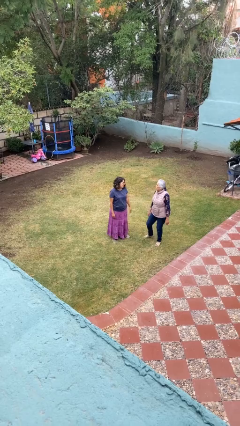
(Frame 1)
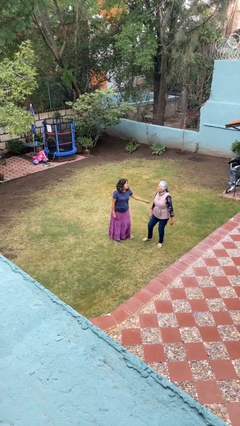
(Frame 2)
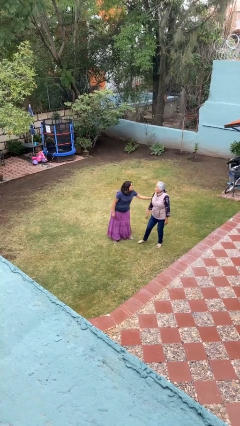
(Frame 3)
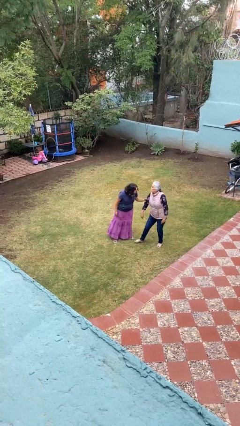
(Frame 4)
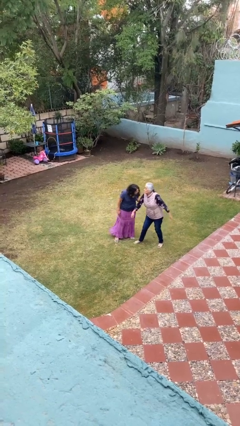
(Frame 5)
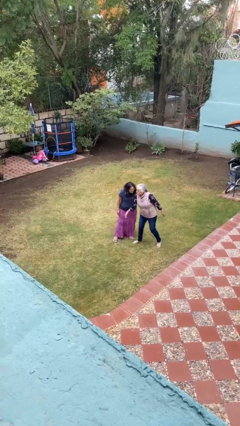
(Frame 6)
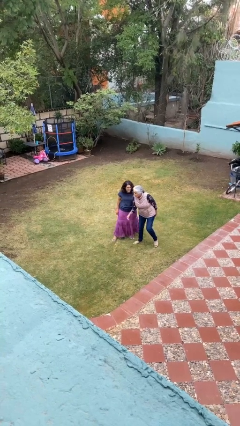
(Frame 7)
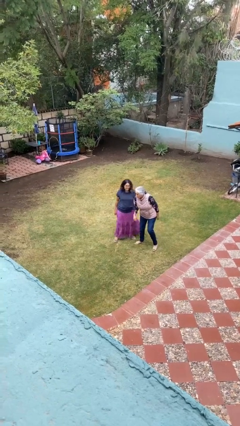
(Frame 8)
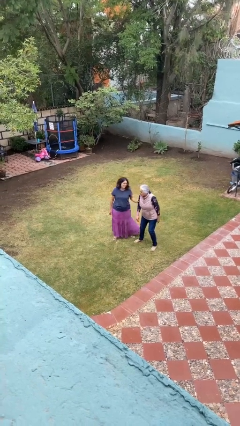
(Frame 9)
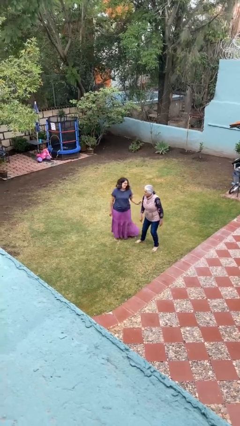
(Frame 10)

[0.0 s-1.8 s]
person grabs person by bicep

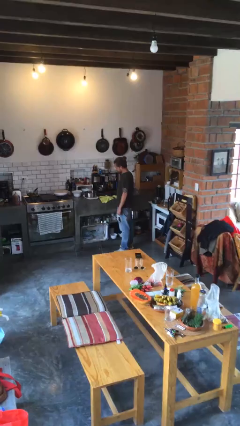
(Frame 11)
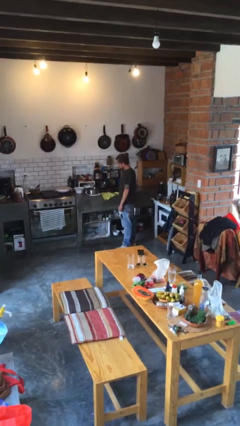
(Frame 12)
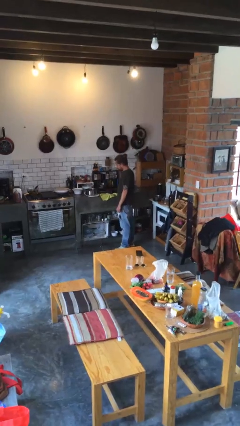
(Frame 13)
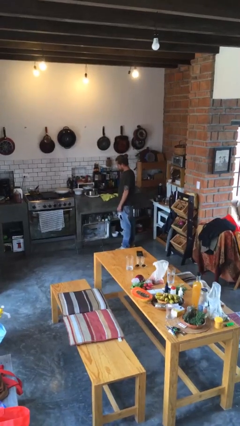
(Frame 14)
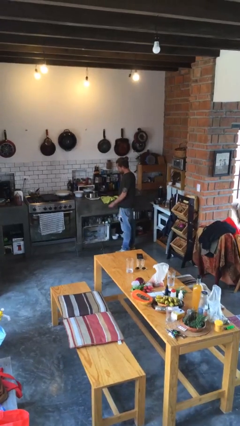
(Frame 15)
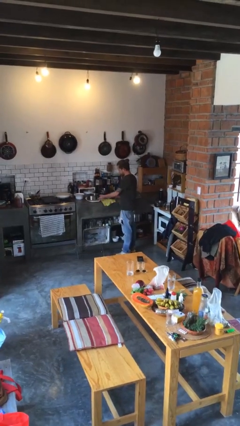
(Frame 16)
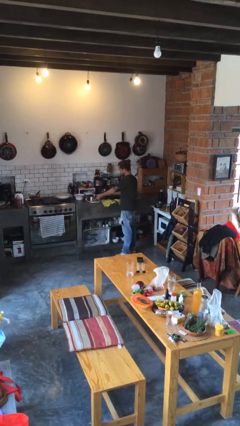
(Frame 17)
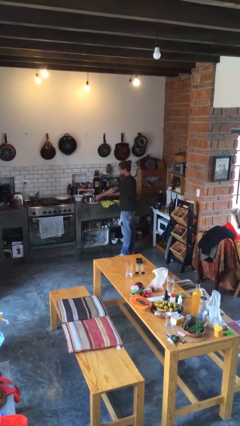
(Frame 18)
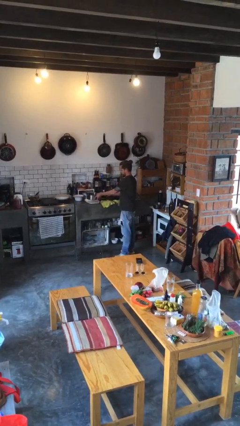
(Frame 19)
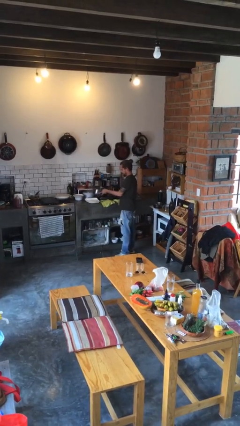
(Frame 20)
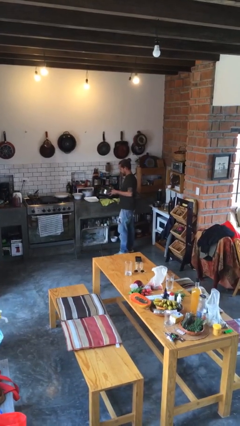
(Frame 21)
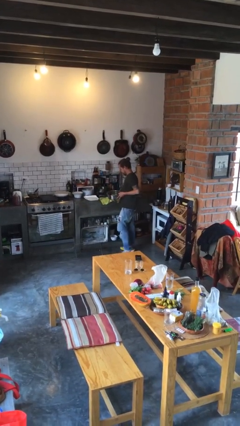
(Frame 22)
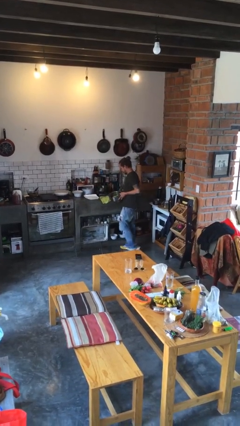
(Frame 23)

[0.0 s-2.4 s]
person picks up object from countertop

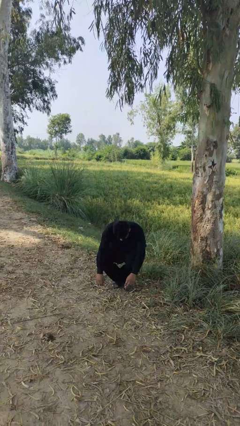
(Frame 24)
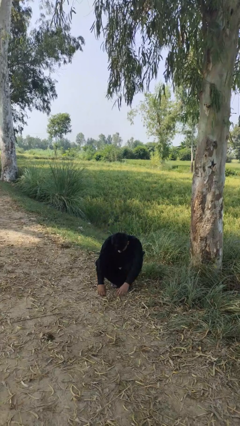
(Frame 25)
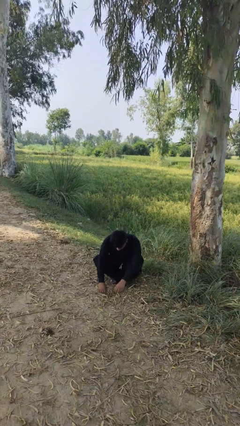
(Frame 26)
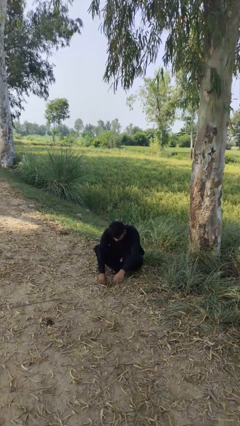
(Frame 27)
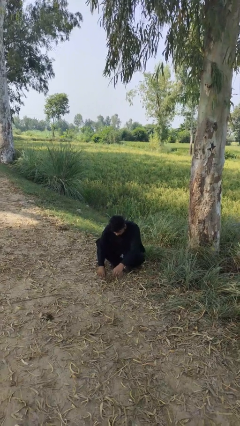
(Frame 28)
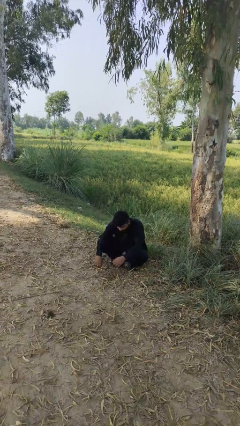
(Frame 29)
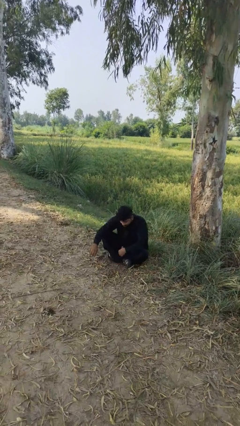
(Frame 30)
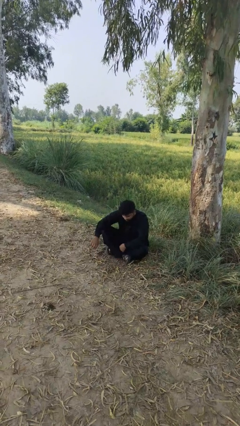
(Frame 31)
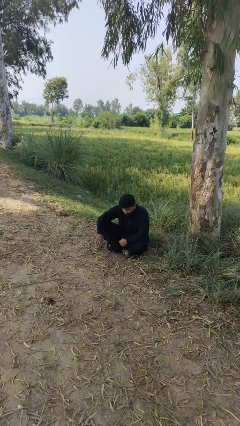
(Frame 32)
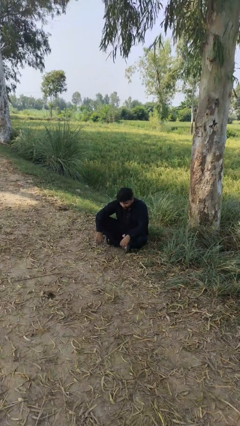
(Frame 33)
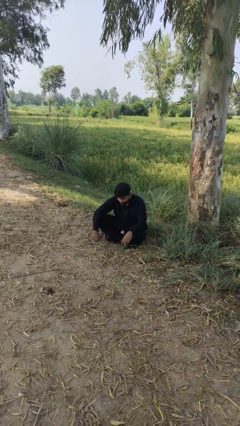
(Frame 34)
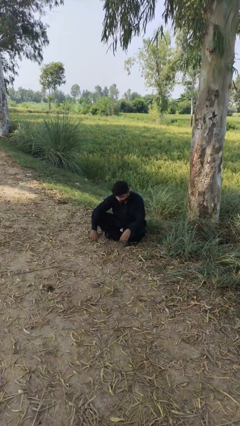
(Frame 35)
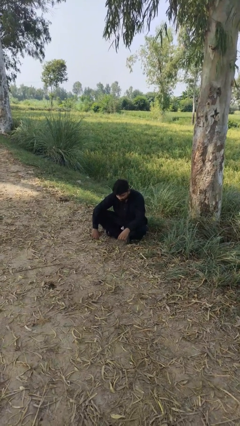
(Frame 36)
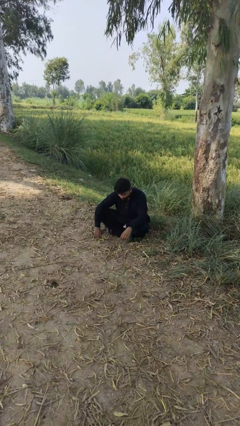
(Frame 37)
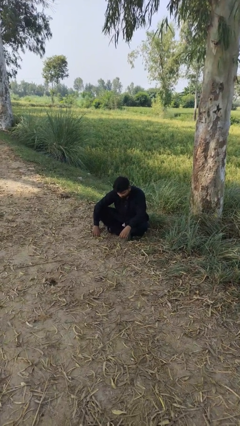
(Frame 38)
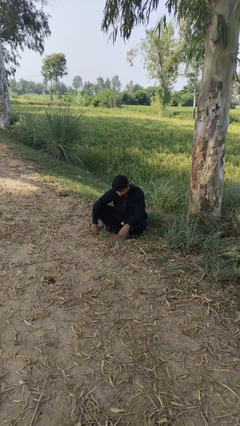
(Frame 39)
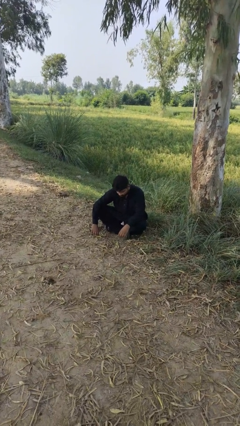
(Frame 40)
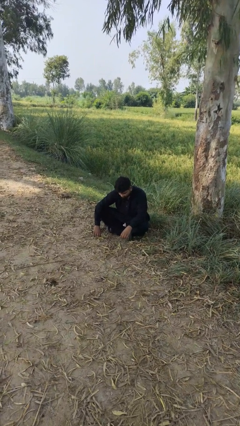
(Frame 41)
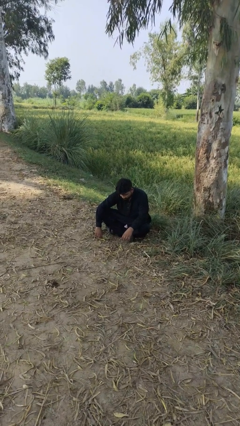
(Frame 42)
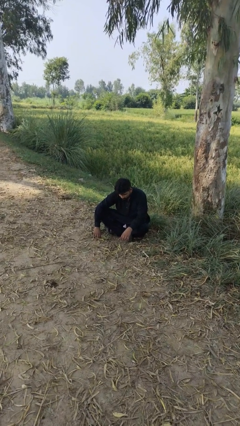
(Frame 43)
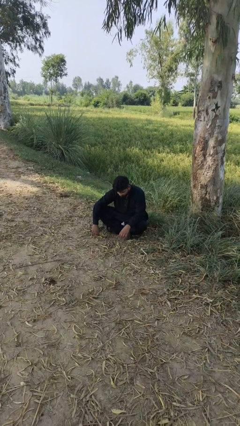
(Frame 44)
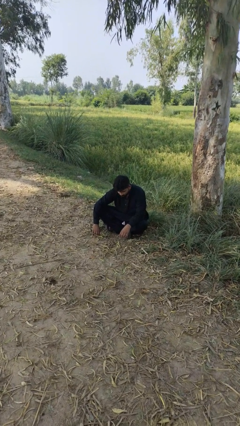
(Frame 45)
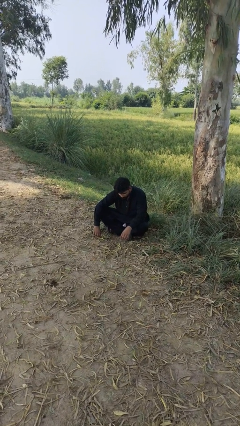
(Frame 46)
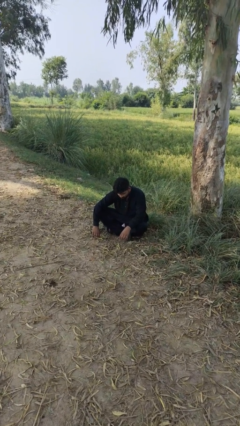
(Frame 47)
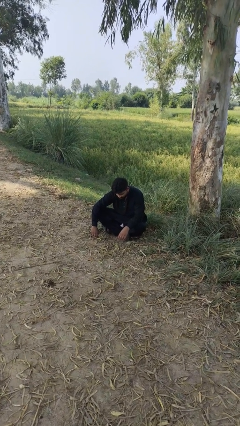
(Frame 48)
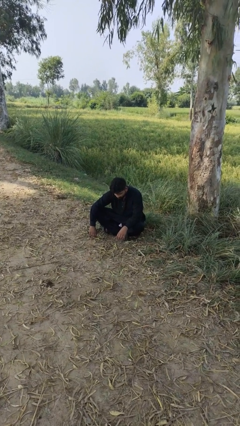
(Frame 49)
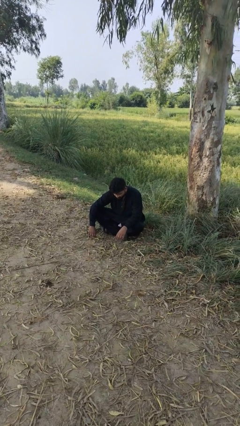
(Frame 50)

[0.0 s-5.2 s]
person sits crisscross

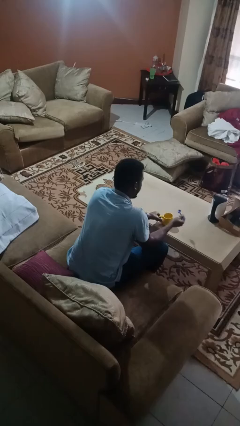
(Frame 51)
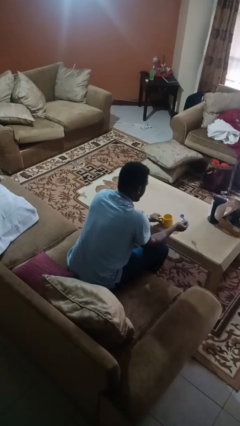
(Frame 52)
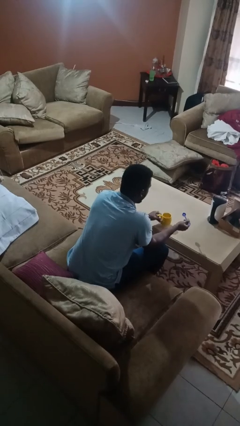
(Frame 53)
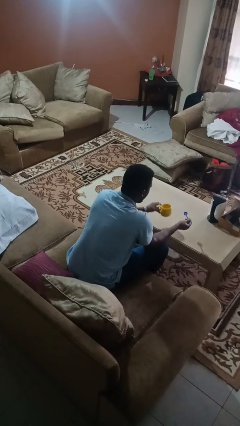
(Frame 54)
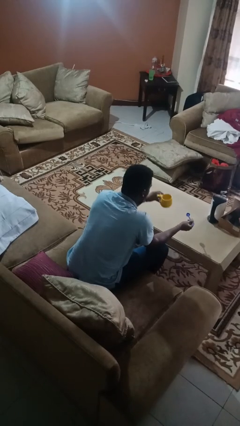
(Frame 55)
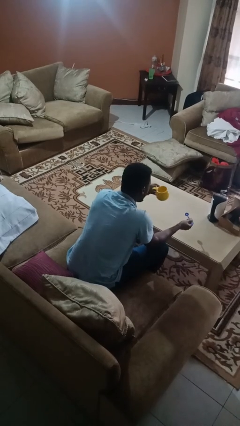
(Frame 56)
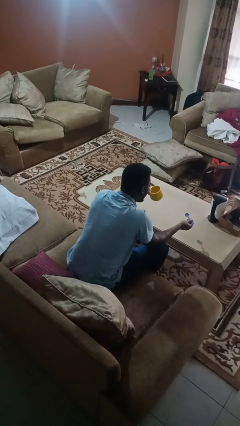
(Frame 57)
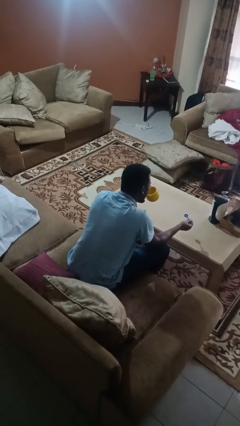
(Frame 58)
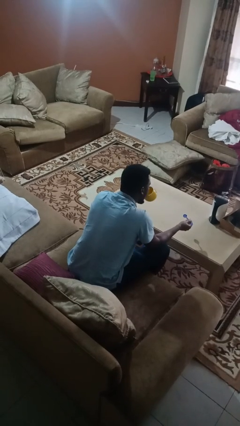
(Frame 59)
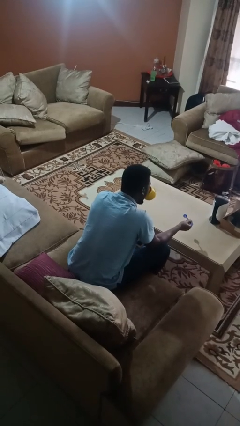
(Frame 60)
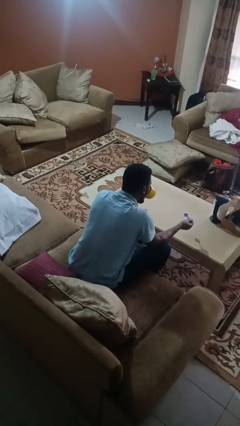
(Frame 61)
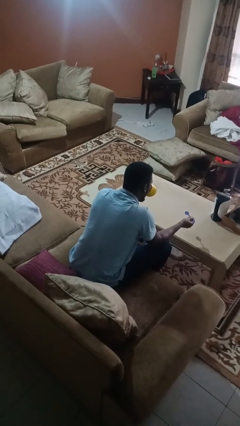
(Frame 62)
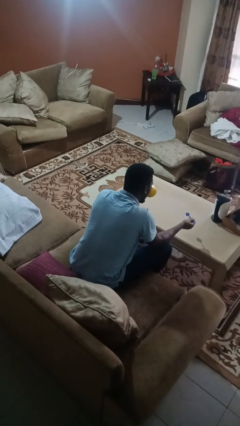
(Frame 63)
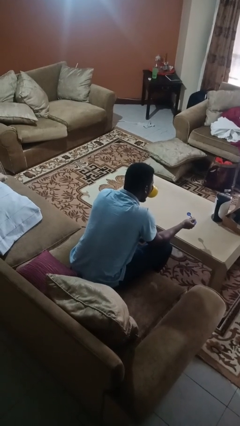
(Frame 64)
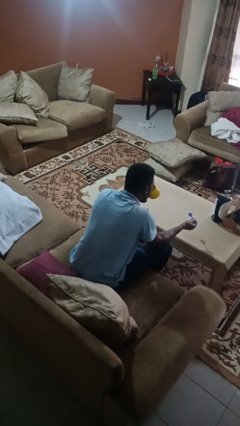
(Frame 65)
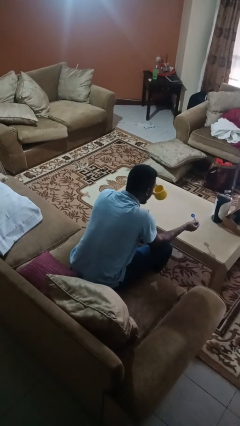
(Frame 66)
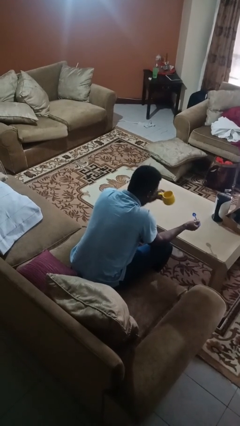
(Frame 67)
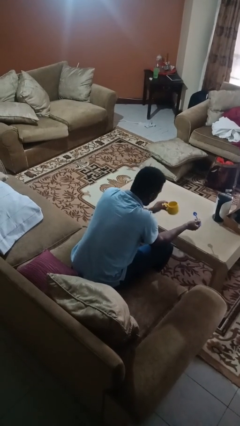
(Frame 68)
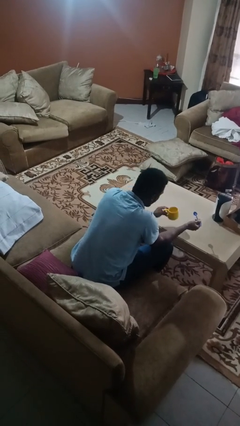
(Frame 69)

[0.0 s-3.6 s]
person drinks from mug

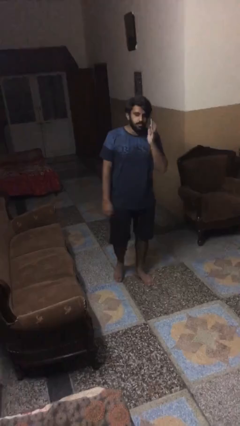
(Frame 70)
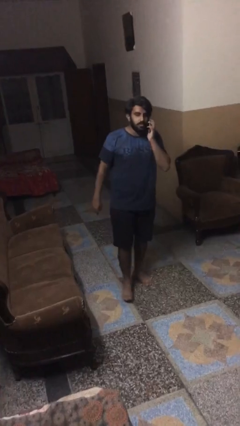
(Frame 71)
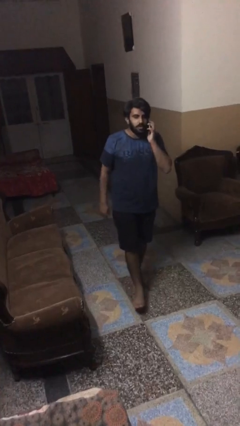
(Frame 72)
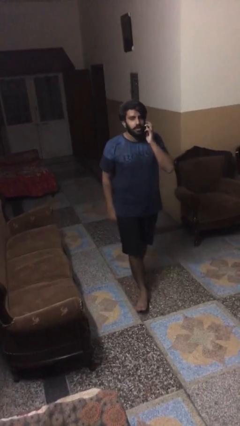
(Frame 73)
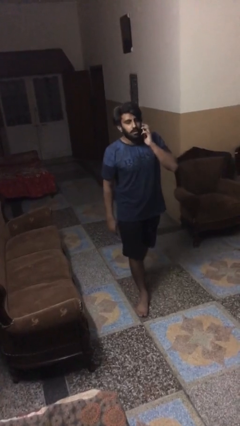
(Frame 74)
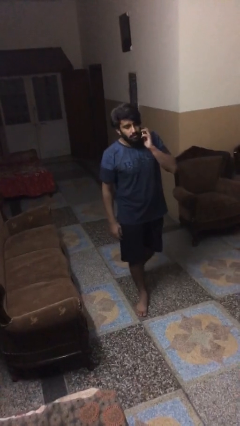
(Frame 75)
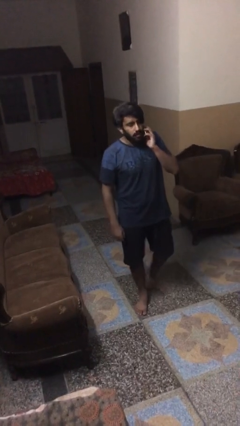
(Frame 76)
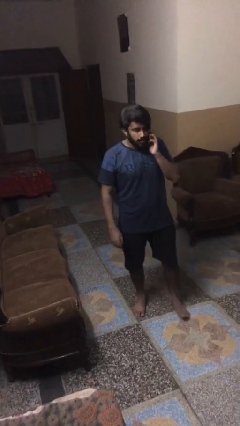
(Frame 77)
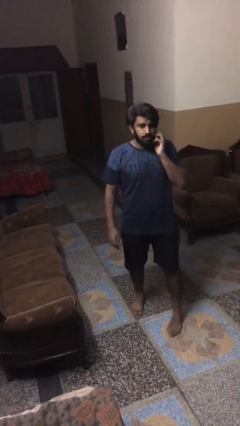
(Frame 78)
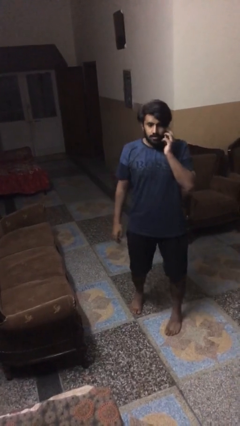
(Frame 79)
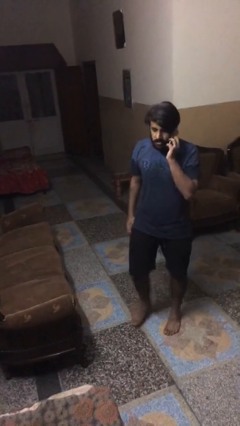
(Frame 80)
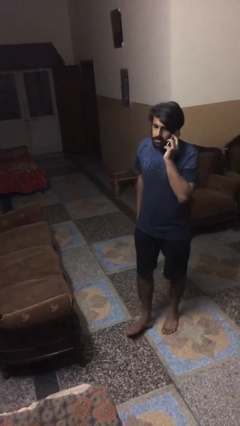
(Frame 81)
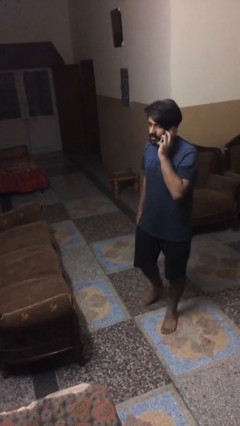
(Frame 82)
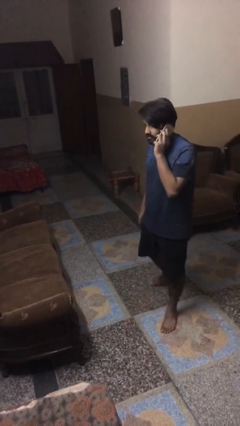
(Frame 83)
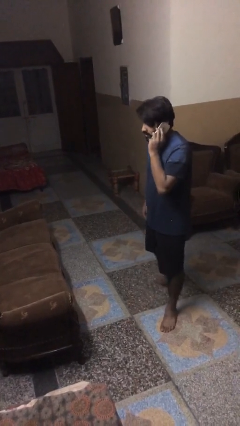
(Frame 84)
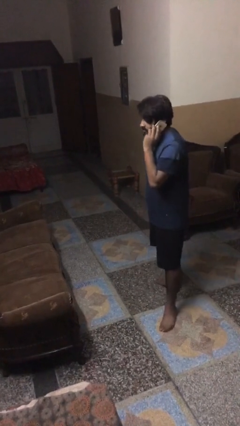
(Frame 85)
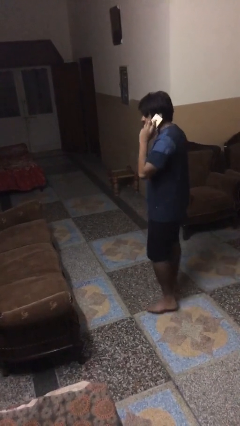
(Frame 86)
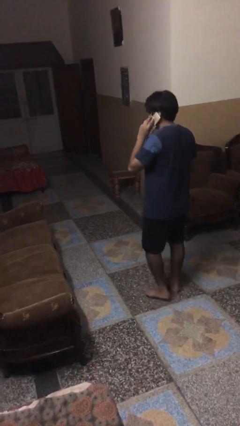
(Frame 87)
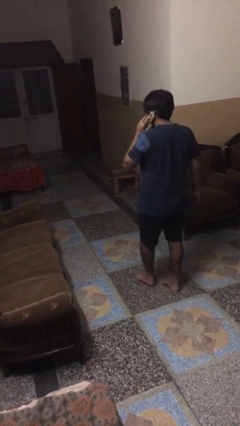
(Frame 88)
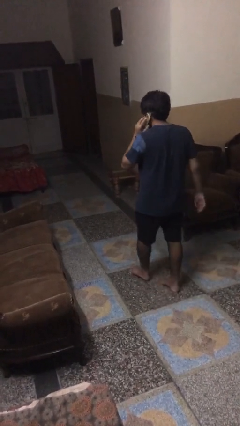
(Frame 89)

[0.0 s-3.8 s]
person talks on phone

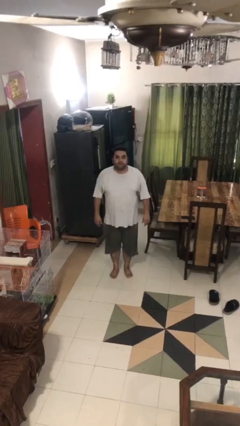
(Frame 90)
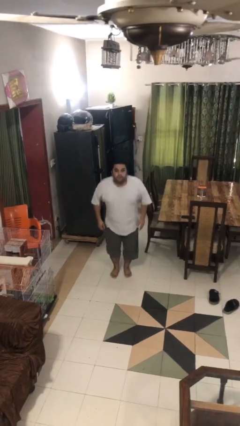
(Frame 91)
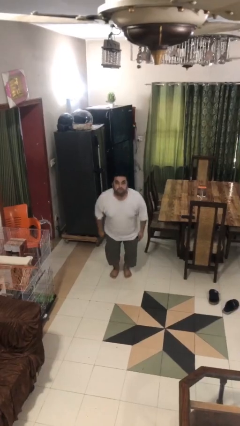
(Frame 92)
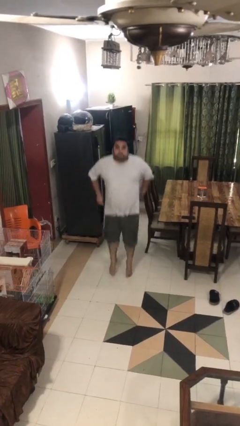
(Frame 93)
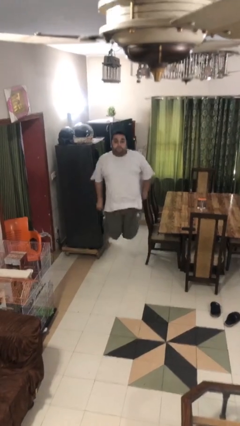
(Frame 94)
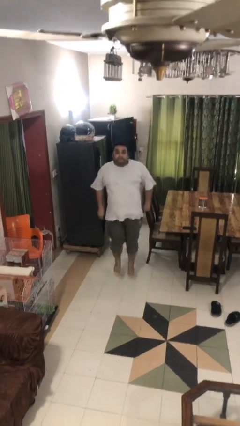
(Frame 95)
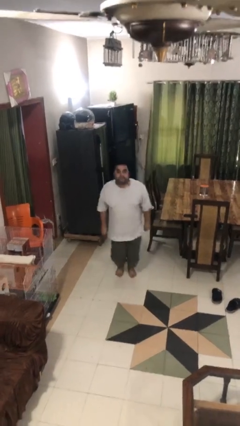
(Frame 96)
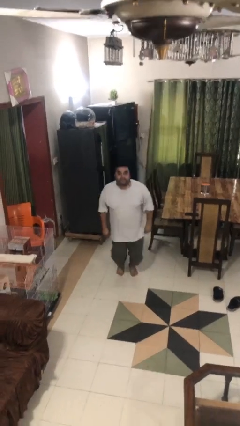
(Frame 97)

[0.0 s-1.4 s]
person jumps
